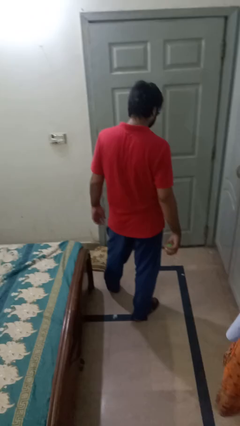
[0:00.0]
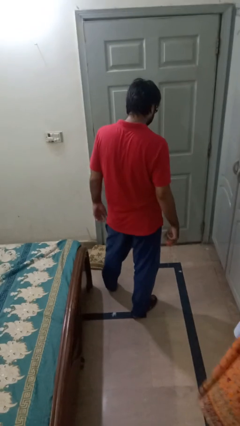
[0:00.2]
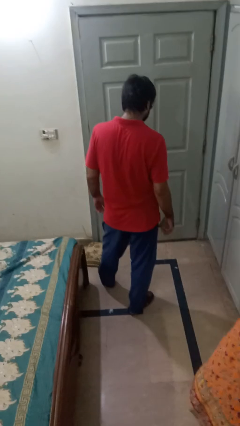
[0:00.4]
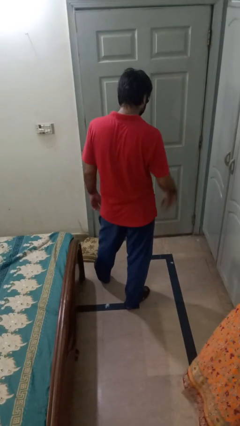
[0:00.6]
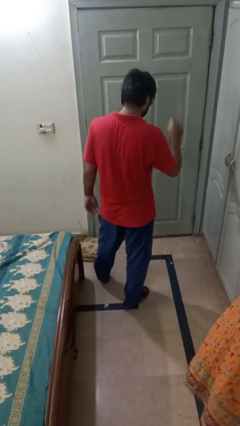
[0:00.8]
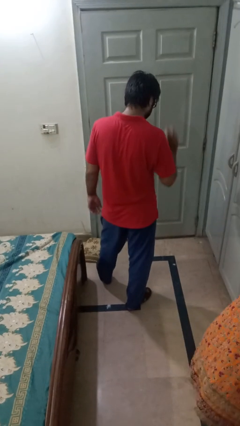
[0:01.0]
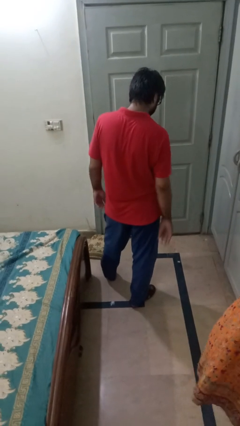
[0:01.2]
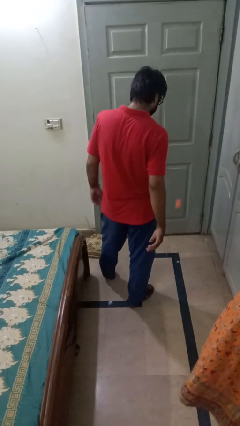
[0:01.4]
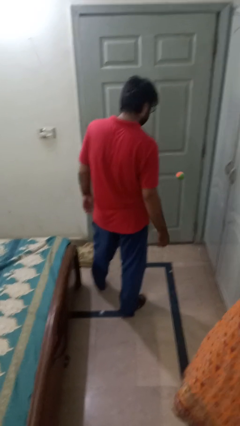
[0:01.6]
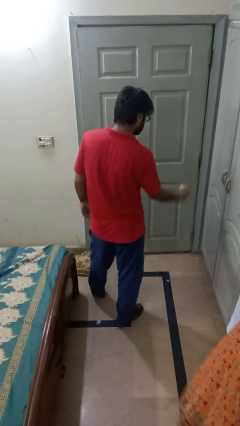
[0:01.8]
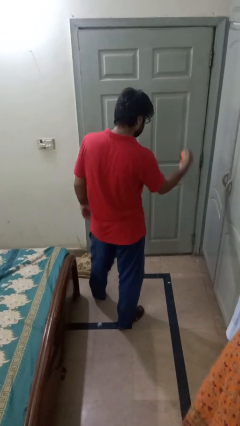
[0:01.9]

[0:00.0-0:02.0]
person bounces ball on floor

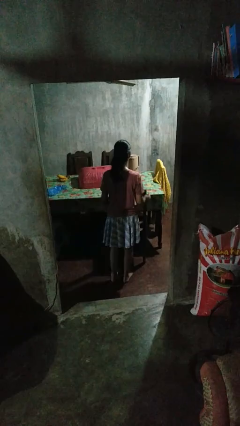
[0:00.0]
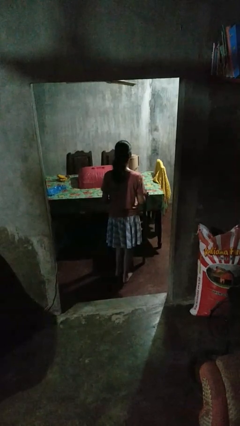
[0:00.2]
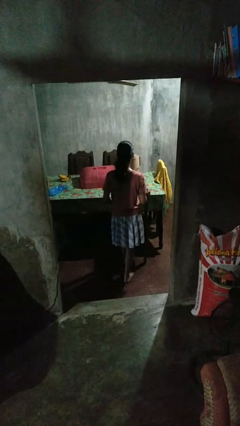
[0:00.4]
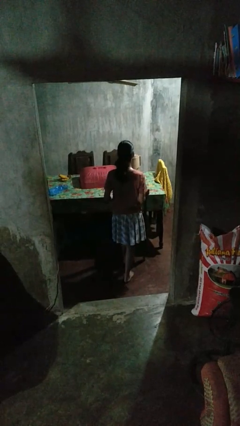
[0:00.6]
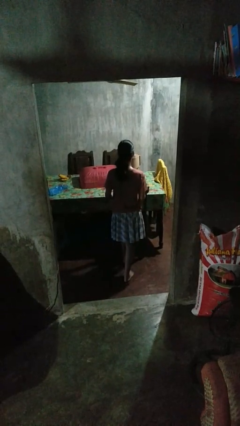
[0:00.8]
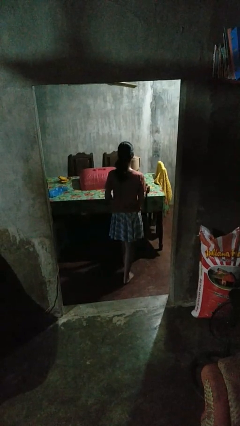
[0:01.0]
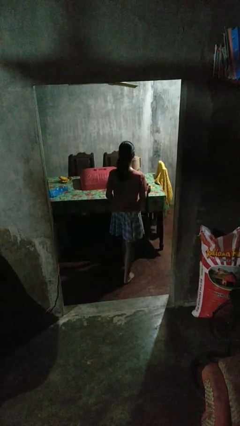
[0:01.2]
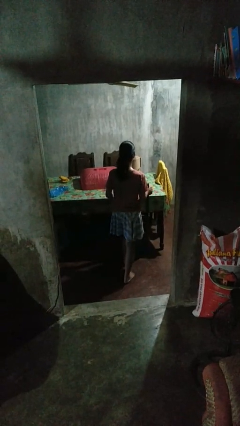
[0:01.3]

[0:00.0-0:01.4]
person pushes in chair

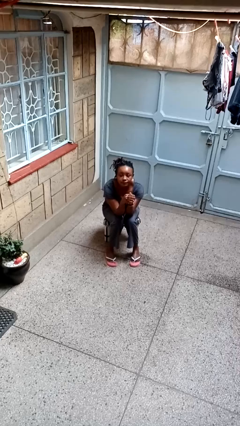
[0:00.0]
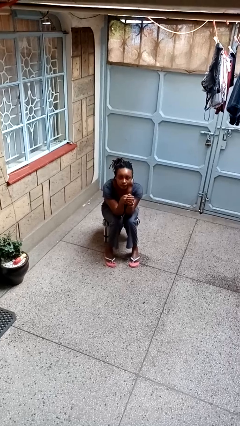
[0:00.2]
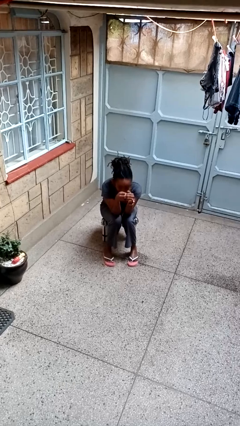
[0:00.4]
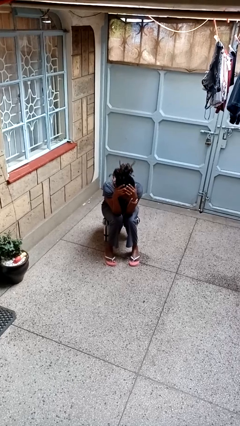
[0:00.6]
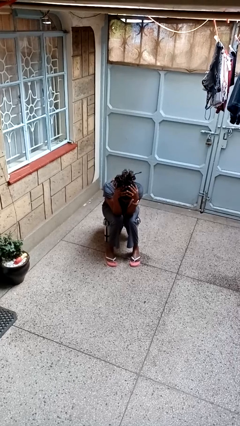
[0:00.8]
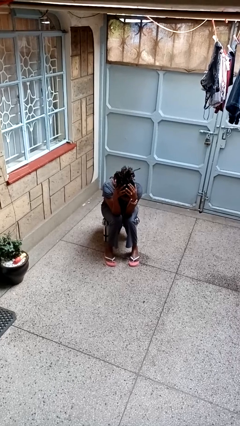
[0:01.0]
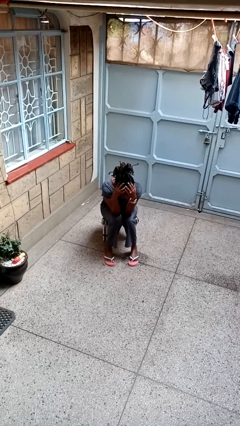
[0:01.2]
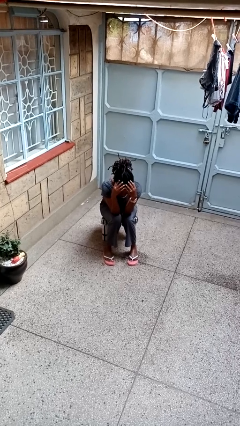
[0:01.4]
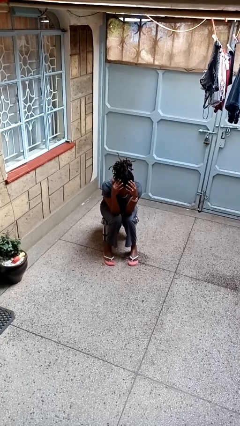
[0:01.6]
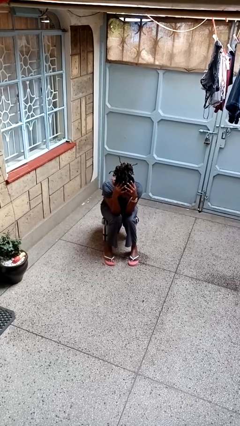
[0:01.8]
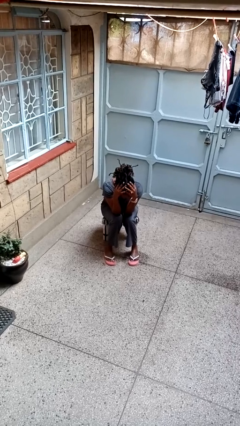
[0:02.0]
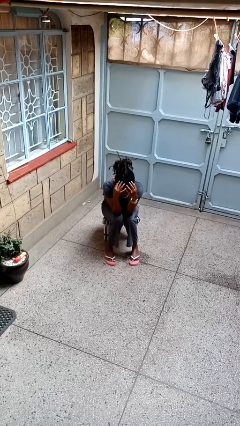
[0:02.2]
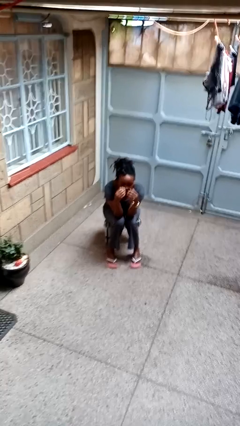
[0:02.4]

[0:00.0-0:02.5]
person strokes hair

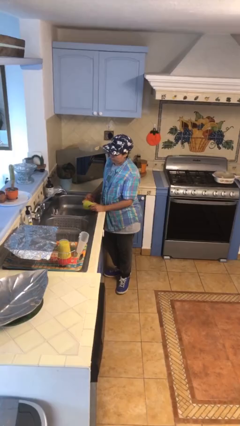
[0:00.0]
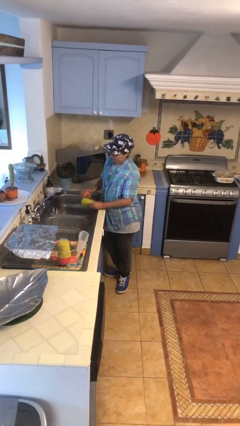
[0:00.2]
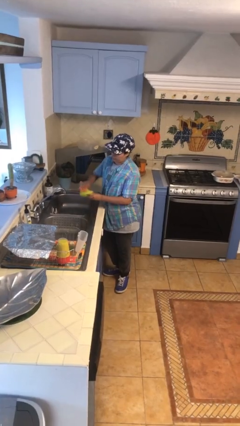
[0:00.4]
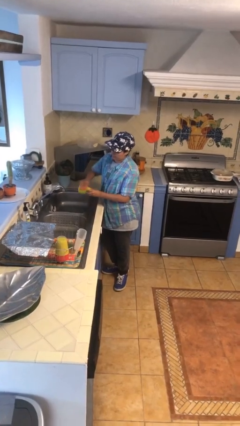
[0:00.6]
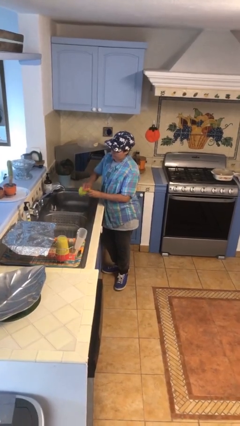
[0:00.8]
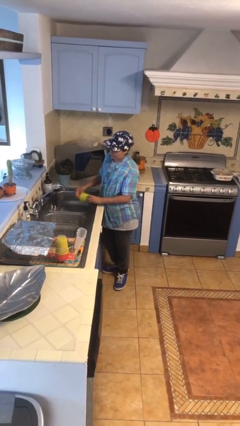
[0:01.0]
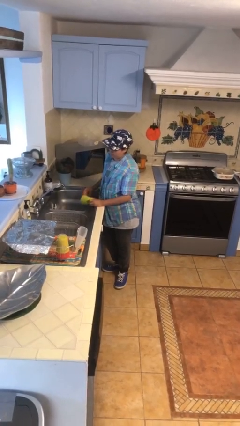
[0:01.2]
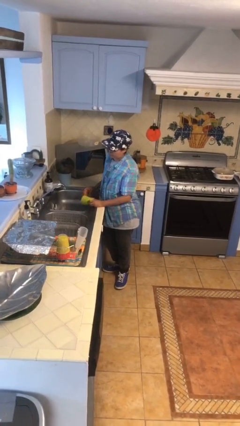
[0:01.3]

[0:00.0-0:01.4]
person washes dish

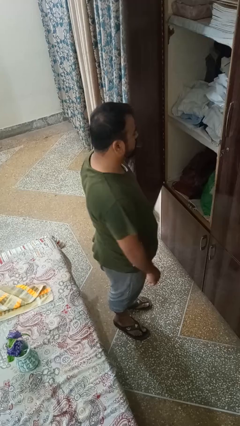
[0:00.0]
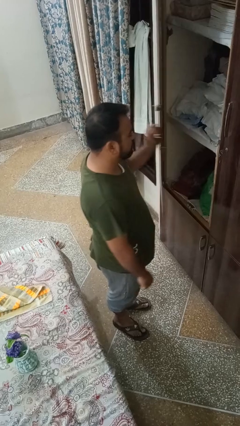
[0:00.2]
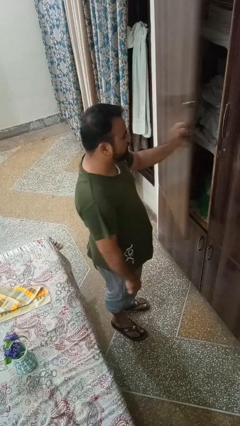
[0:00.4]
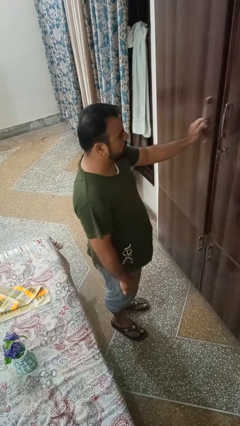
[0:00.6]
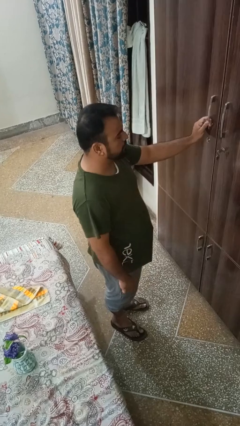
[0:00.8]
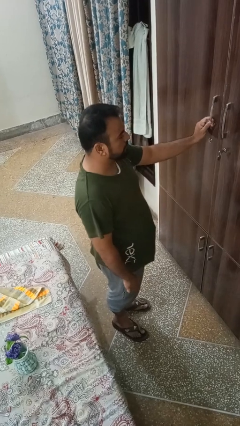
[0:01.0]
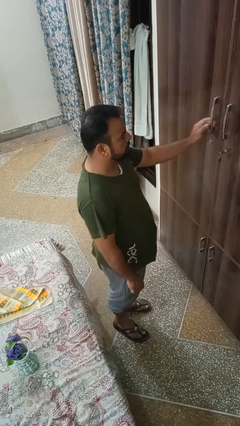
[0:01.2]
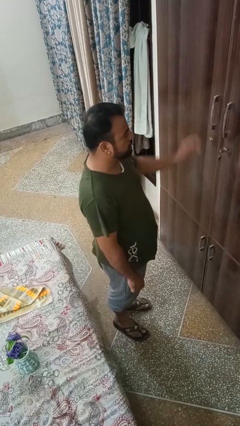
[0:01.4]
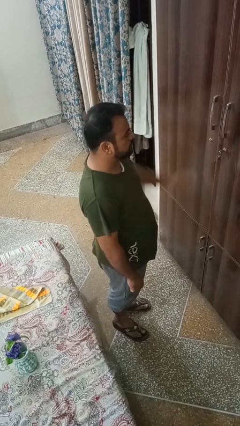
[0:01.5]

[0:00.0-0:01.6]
person closes closet door

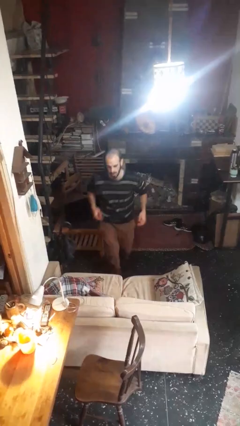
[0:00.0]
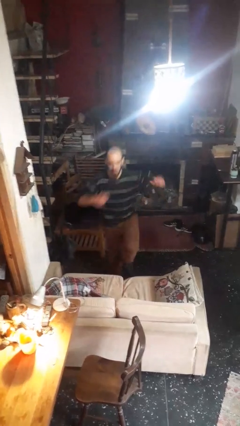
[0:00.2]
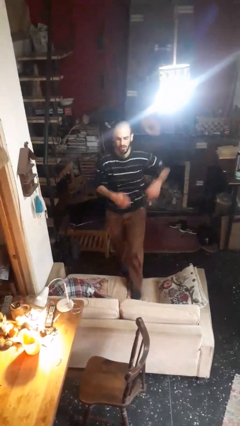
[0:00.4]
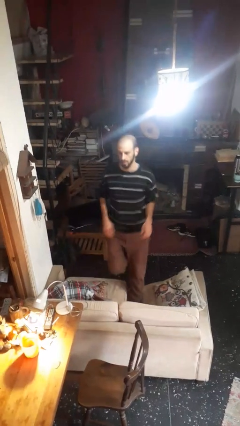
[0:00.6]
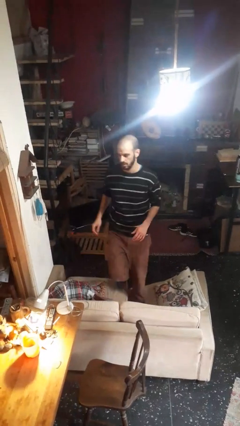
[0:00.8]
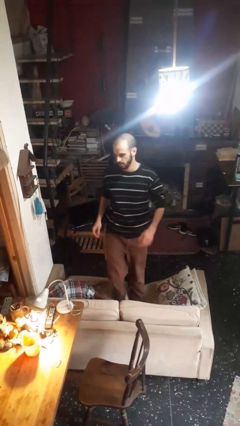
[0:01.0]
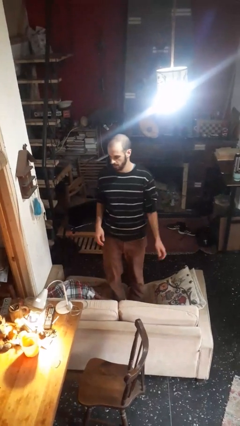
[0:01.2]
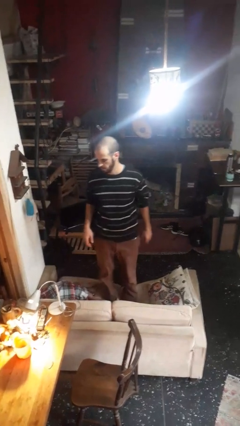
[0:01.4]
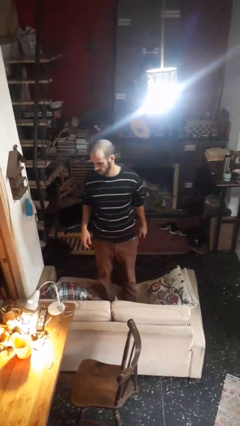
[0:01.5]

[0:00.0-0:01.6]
person climbs on couch

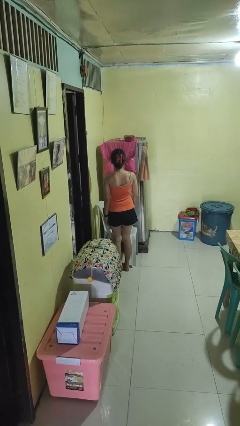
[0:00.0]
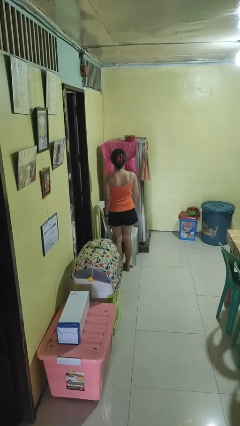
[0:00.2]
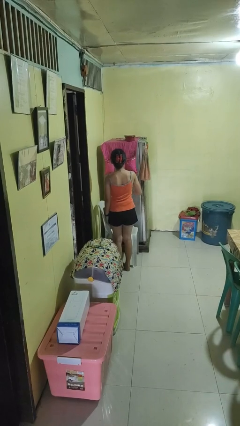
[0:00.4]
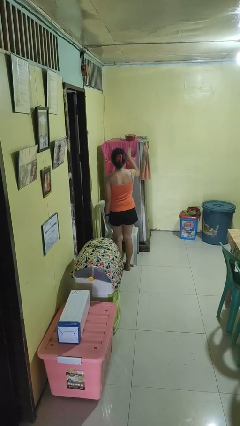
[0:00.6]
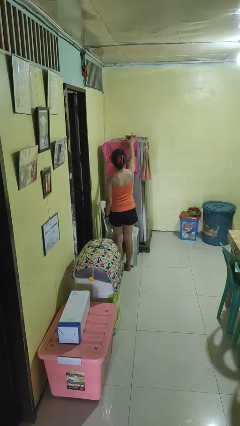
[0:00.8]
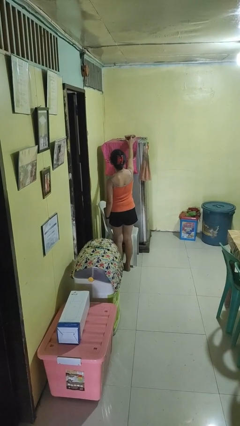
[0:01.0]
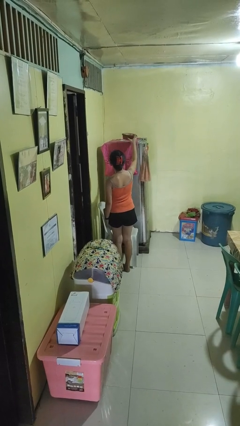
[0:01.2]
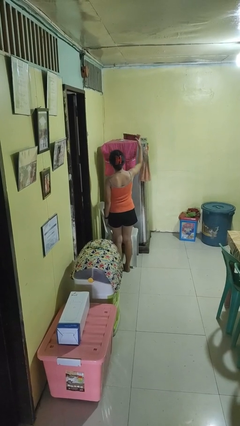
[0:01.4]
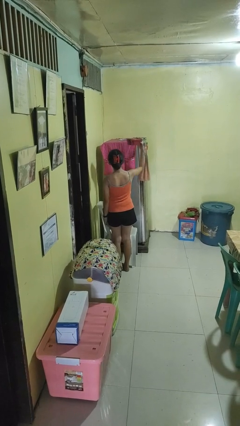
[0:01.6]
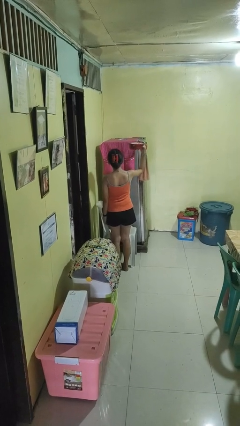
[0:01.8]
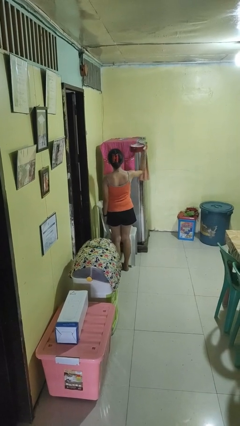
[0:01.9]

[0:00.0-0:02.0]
person picks up object from shelf

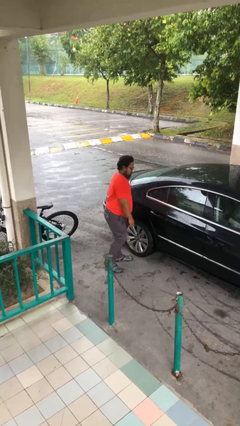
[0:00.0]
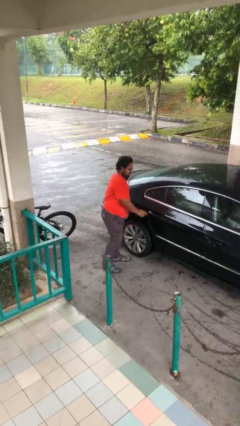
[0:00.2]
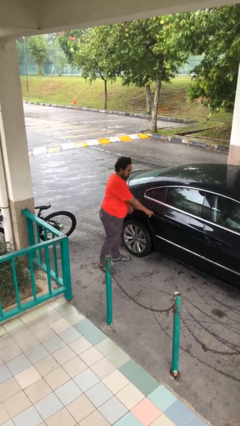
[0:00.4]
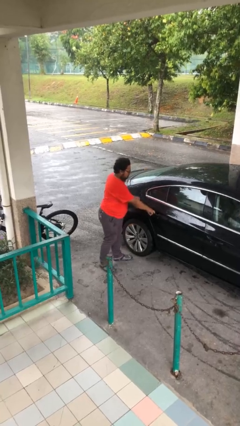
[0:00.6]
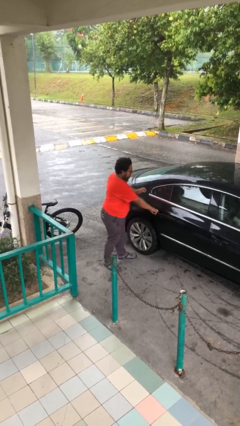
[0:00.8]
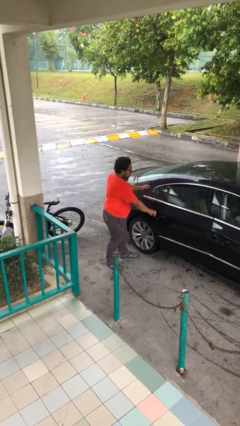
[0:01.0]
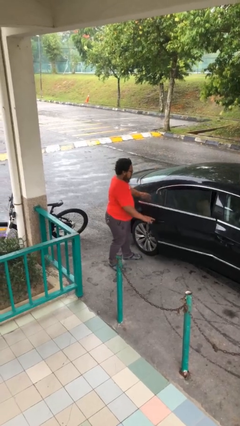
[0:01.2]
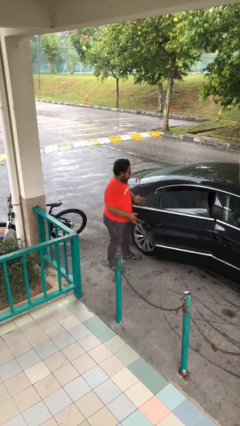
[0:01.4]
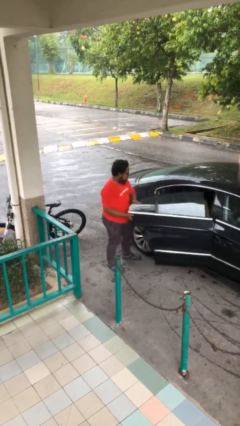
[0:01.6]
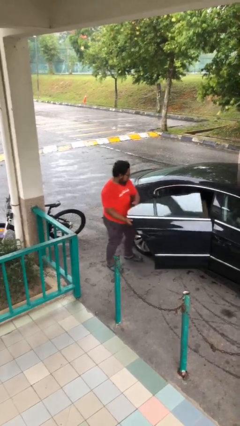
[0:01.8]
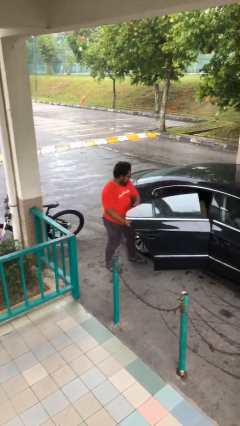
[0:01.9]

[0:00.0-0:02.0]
person opens car door

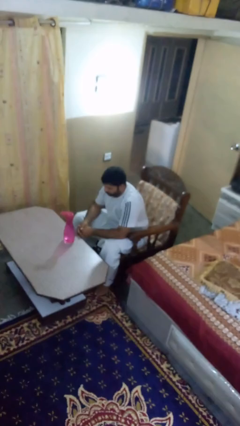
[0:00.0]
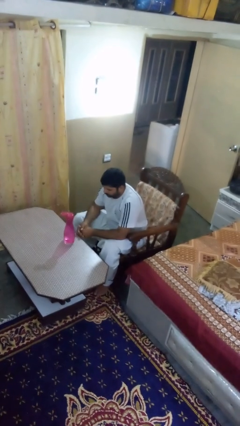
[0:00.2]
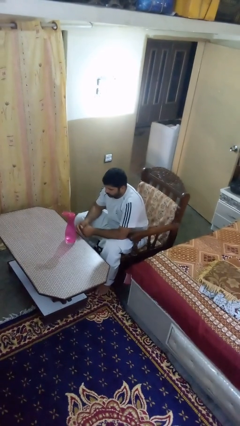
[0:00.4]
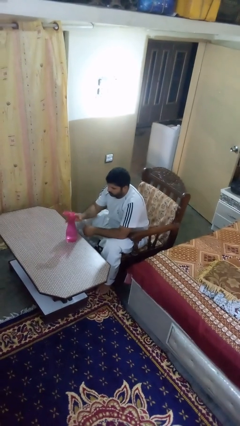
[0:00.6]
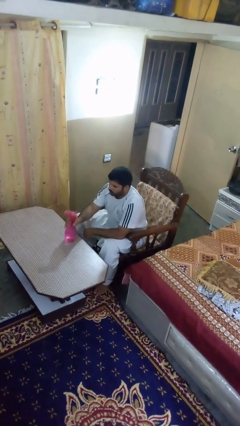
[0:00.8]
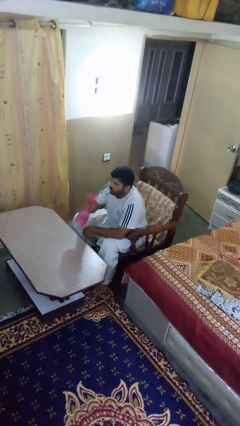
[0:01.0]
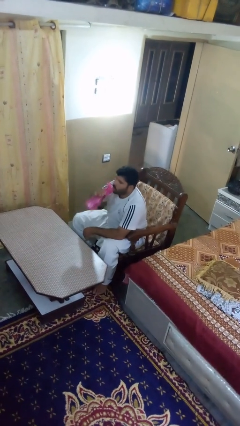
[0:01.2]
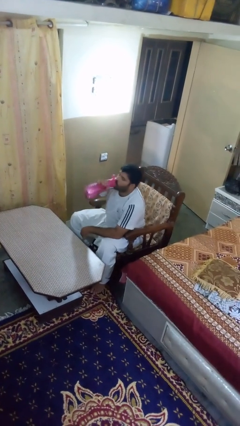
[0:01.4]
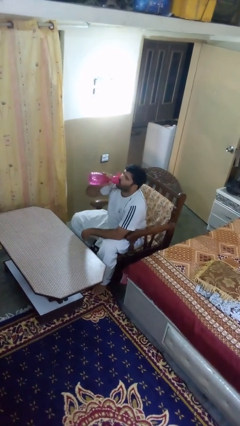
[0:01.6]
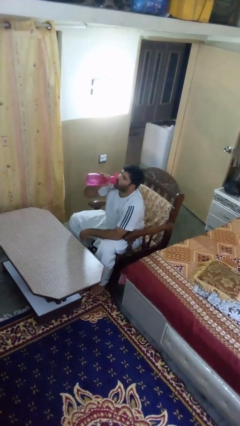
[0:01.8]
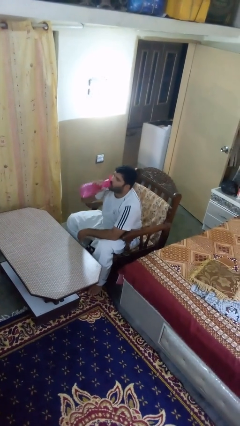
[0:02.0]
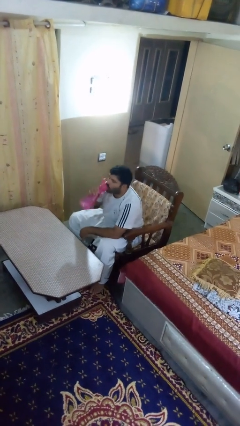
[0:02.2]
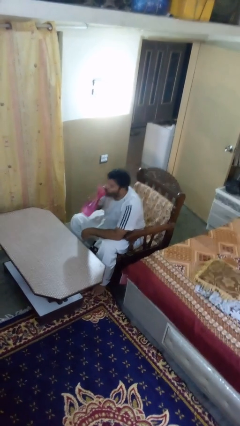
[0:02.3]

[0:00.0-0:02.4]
person drinks from bottle
